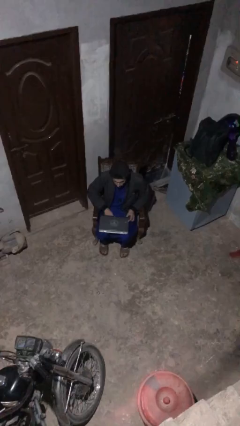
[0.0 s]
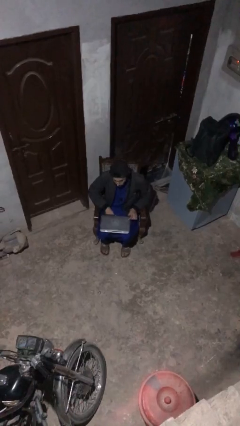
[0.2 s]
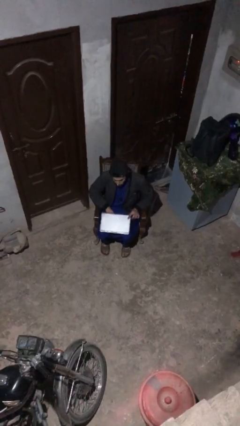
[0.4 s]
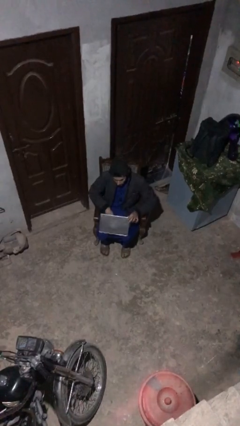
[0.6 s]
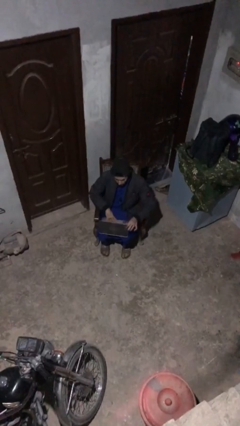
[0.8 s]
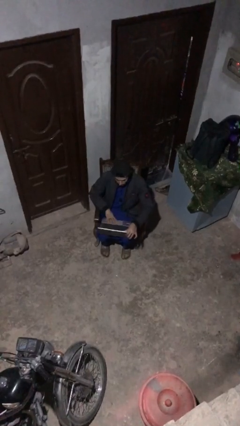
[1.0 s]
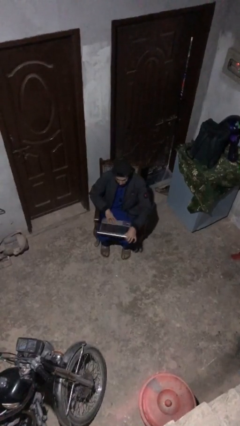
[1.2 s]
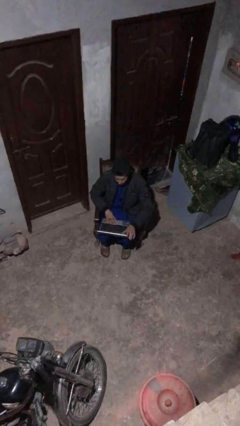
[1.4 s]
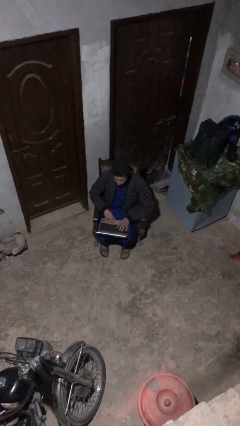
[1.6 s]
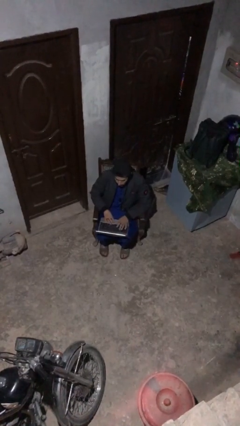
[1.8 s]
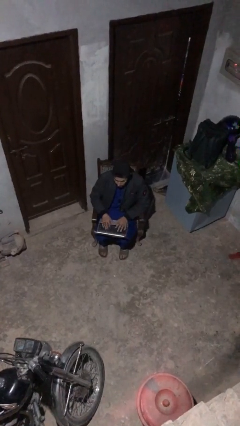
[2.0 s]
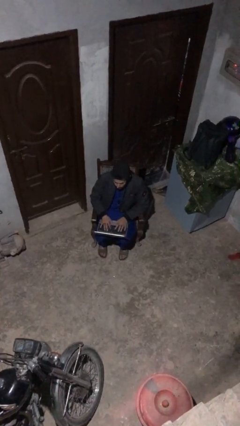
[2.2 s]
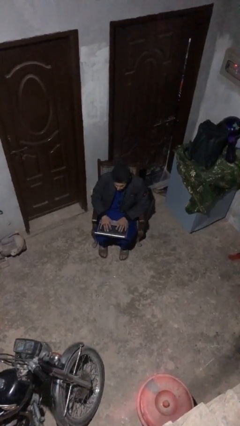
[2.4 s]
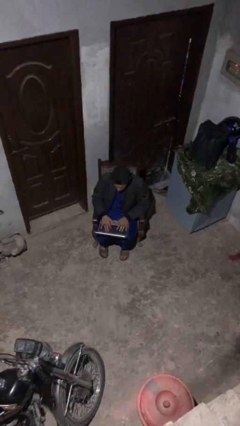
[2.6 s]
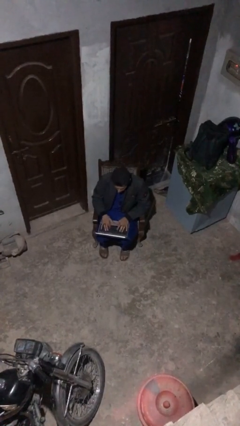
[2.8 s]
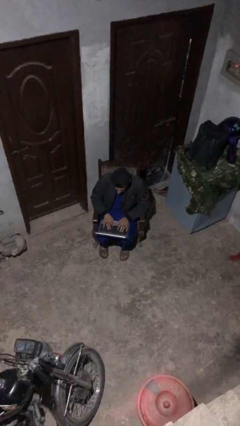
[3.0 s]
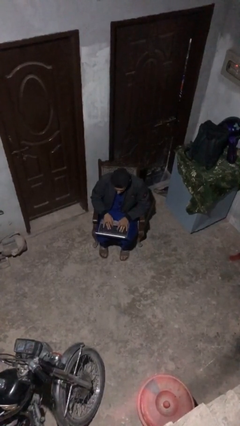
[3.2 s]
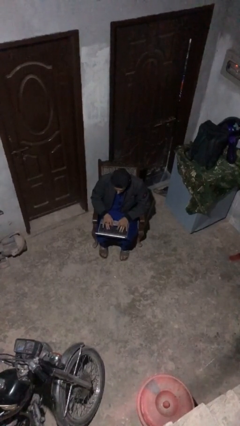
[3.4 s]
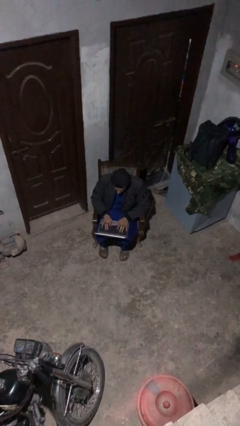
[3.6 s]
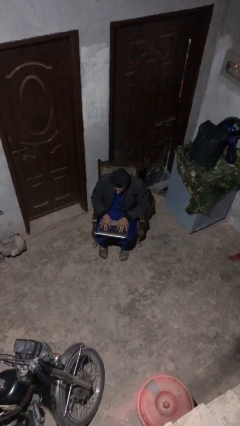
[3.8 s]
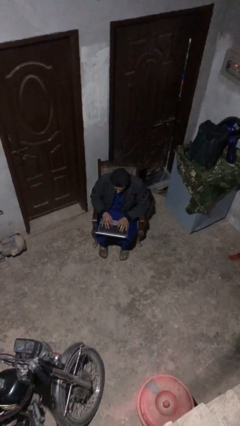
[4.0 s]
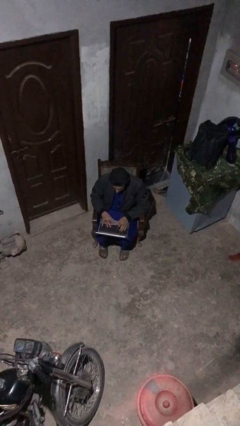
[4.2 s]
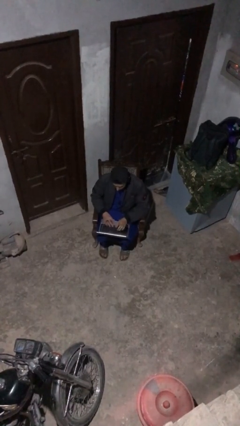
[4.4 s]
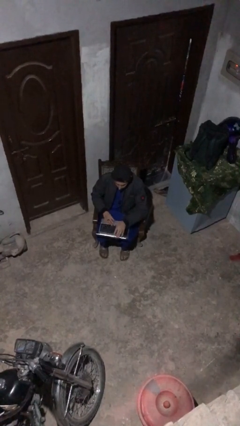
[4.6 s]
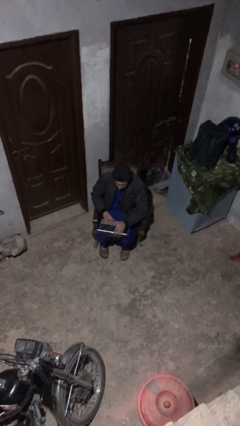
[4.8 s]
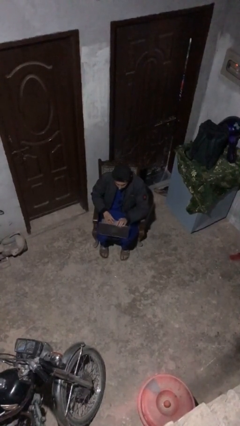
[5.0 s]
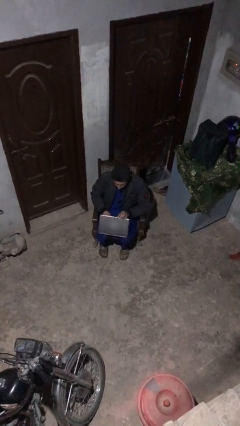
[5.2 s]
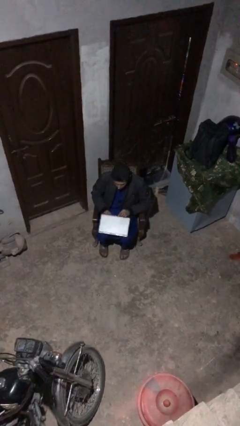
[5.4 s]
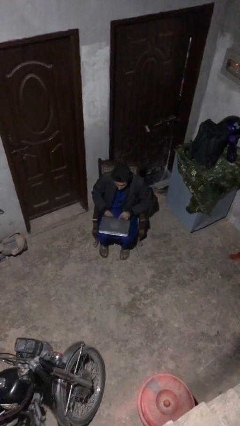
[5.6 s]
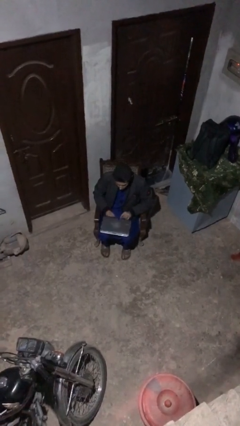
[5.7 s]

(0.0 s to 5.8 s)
person interacts with laptop

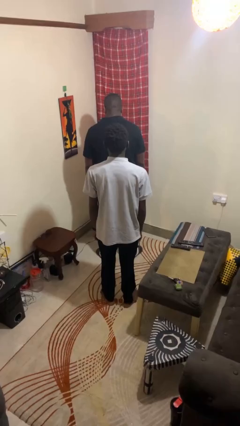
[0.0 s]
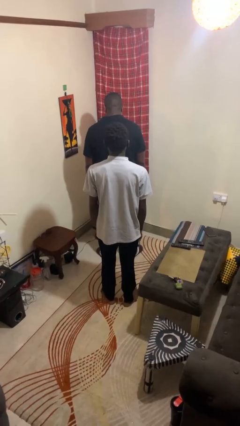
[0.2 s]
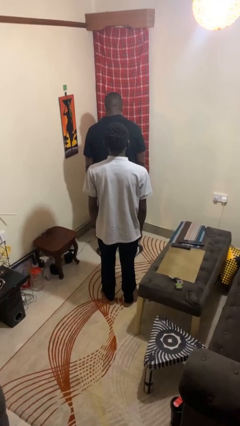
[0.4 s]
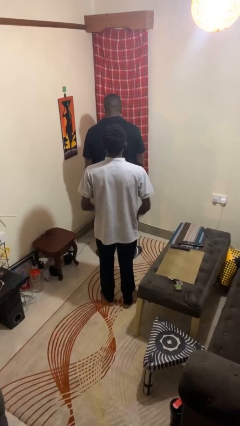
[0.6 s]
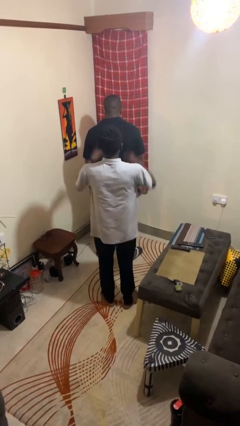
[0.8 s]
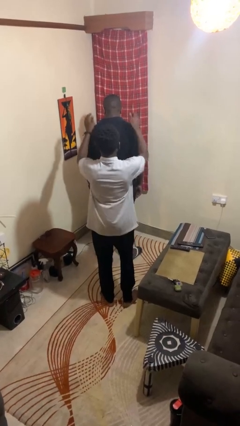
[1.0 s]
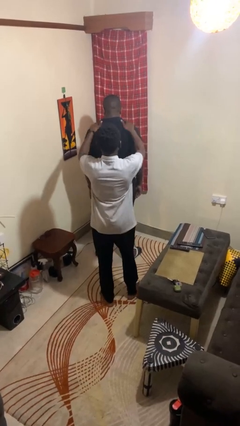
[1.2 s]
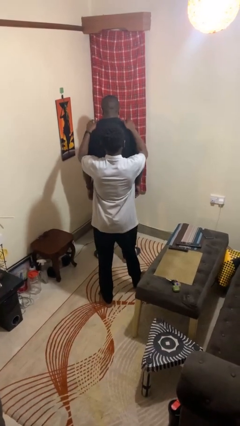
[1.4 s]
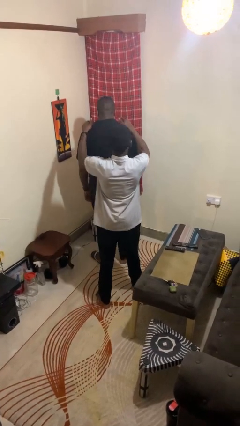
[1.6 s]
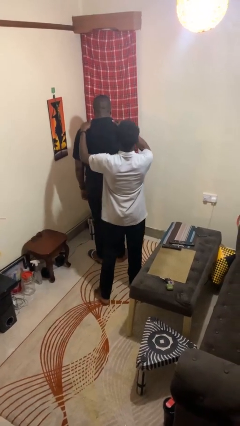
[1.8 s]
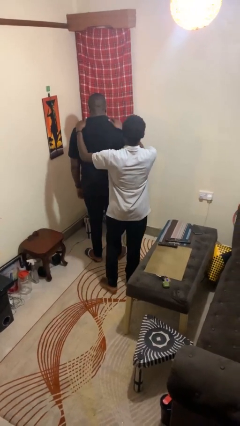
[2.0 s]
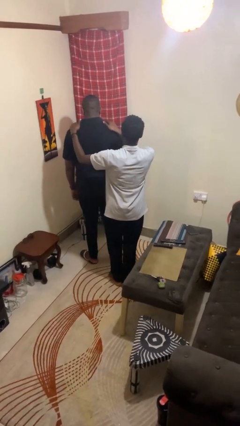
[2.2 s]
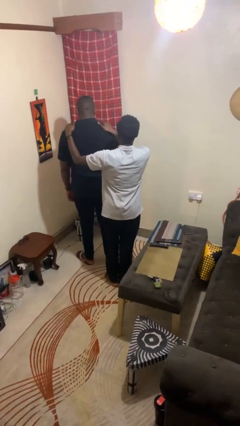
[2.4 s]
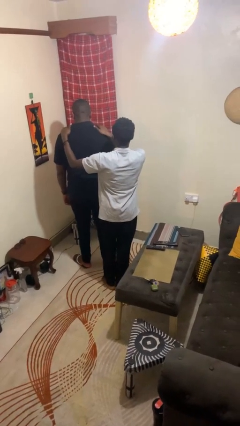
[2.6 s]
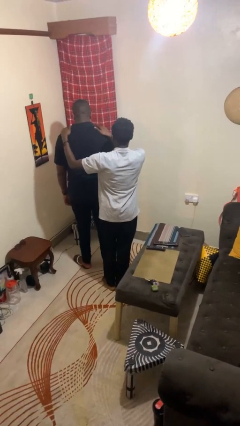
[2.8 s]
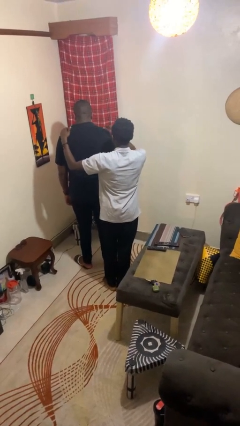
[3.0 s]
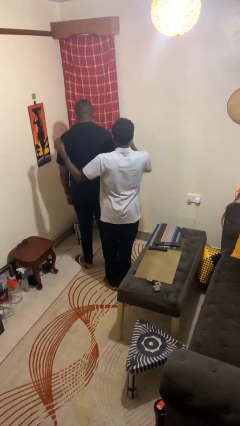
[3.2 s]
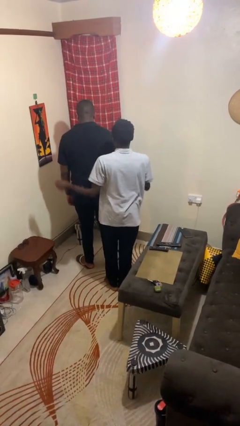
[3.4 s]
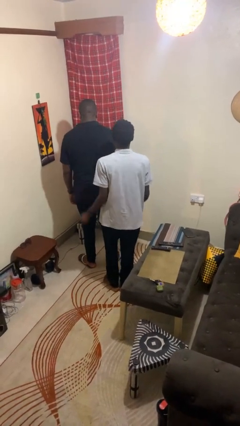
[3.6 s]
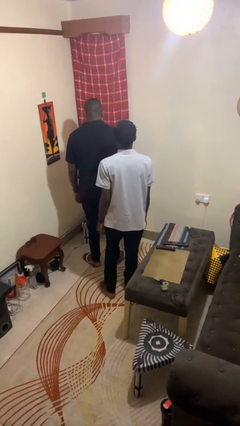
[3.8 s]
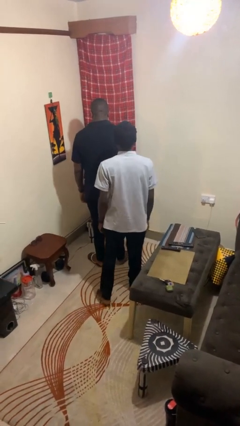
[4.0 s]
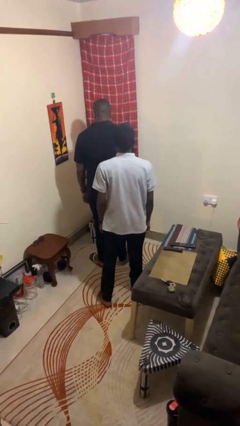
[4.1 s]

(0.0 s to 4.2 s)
person pounds shoulders of person

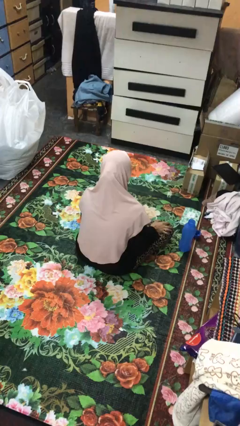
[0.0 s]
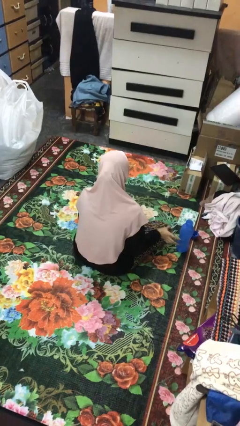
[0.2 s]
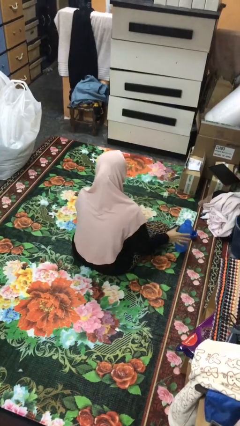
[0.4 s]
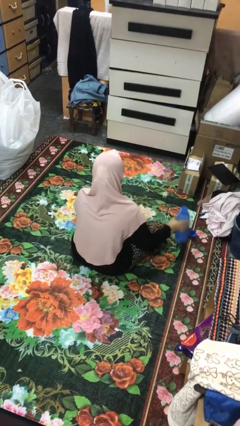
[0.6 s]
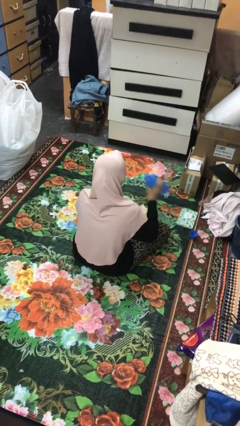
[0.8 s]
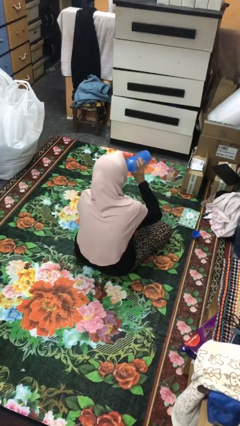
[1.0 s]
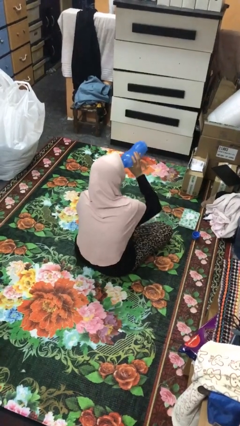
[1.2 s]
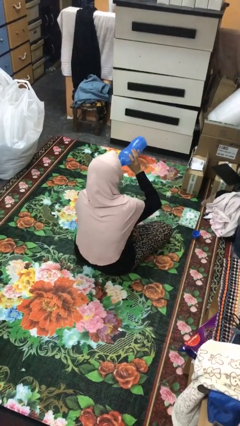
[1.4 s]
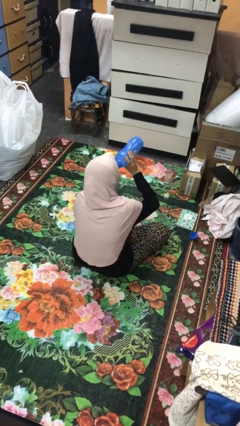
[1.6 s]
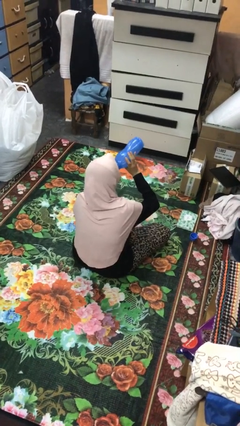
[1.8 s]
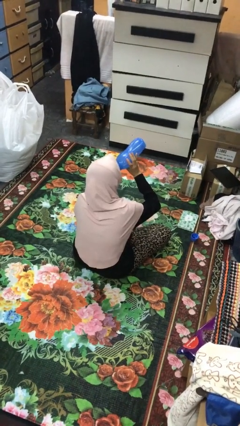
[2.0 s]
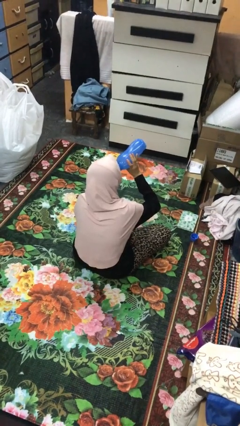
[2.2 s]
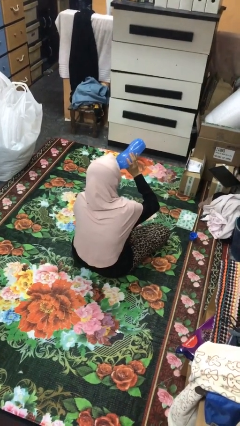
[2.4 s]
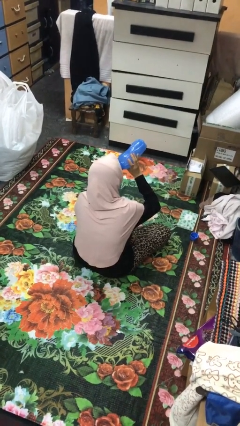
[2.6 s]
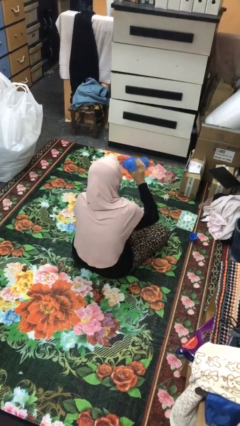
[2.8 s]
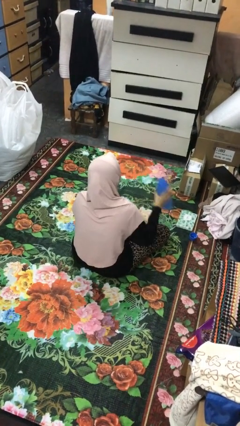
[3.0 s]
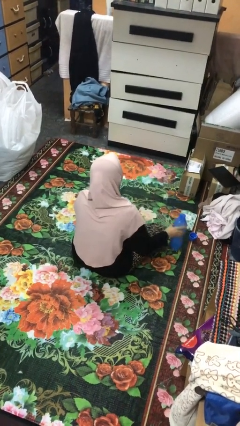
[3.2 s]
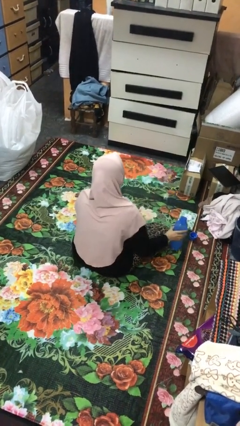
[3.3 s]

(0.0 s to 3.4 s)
person drinks from bottle

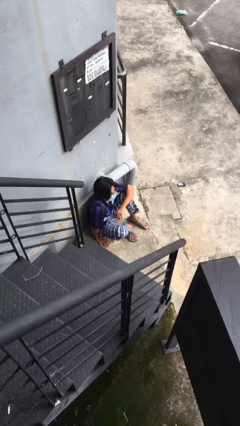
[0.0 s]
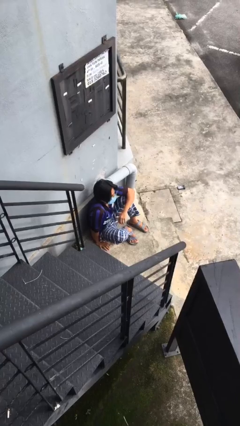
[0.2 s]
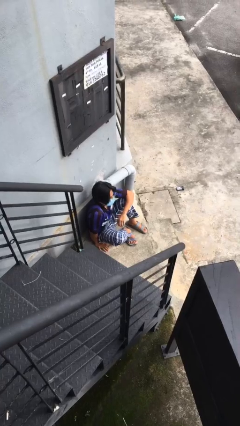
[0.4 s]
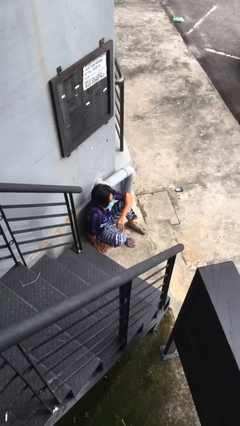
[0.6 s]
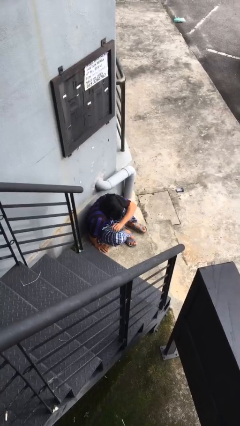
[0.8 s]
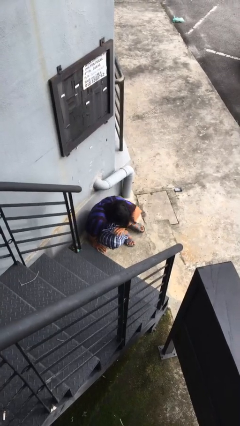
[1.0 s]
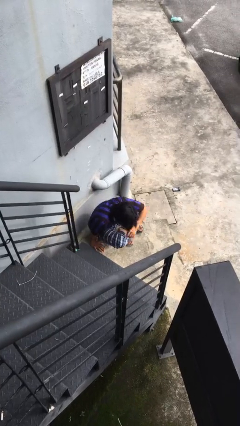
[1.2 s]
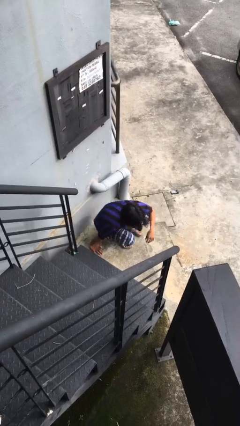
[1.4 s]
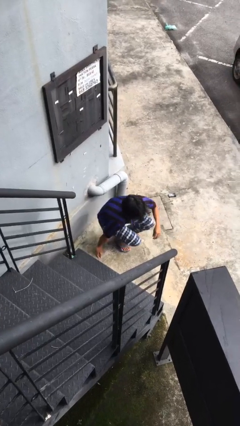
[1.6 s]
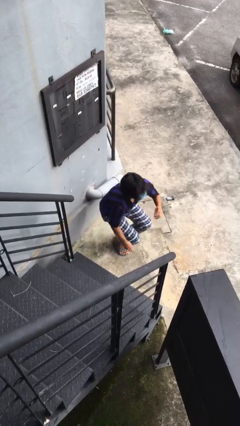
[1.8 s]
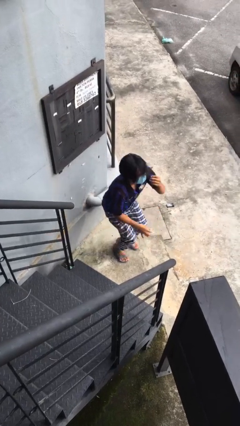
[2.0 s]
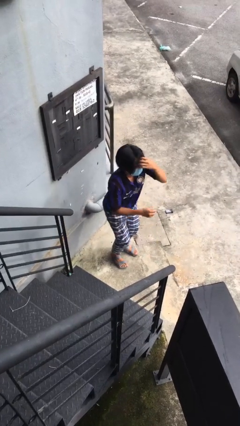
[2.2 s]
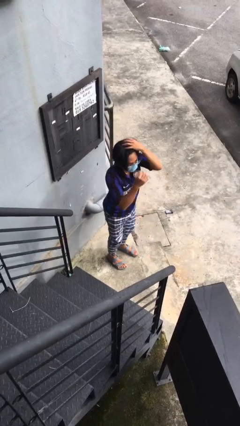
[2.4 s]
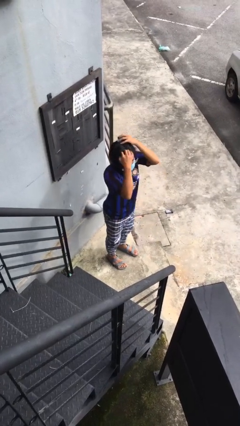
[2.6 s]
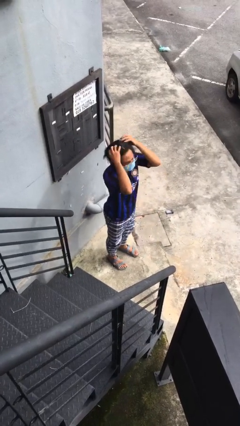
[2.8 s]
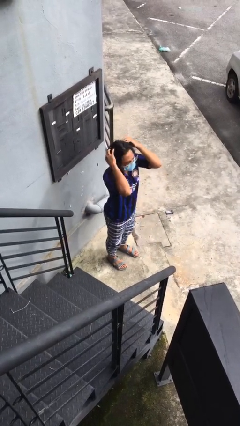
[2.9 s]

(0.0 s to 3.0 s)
person stands up

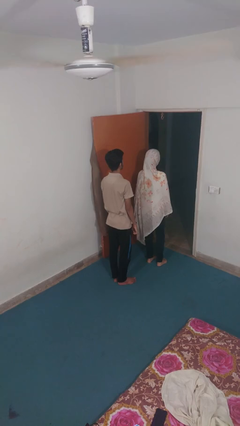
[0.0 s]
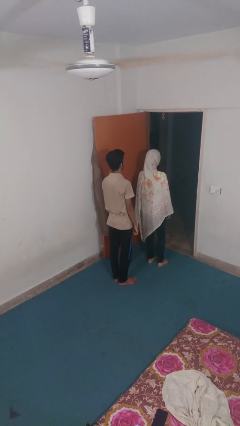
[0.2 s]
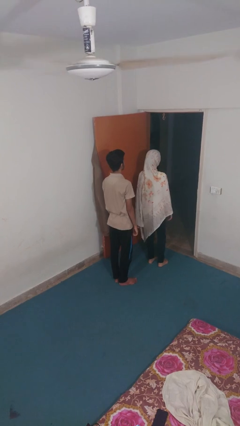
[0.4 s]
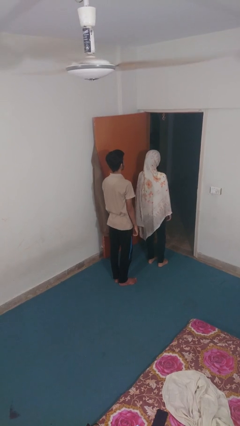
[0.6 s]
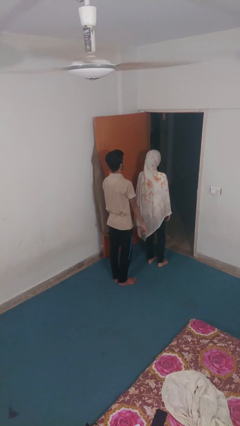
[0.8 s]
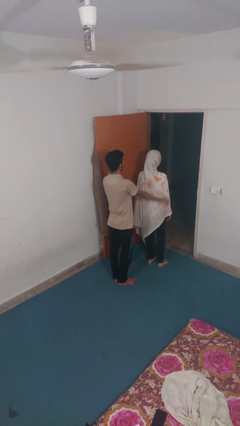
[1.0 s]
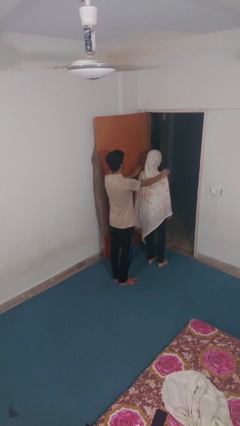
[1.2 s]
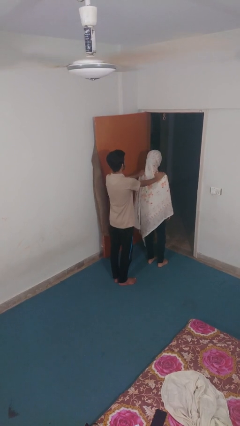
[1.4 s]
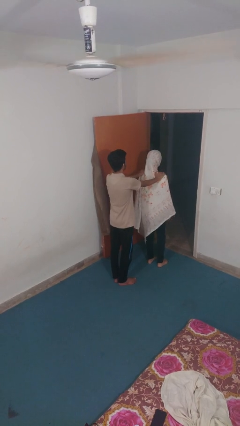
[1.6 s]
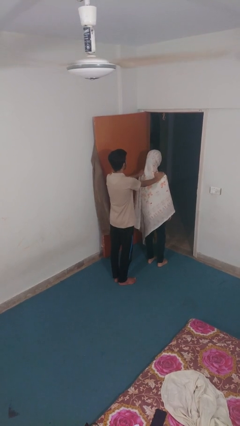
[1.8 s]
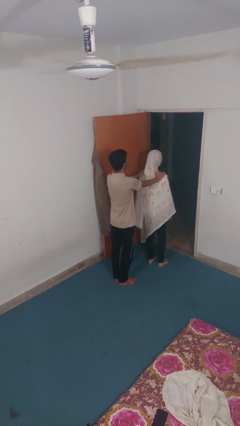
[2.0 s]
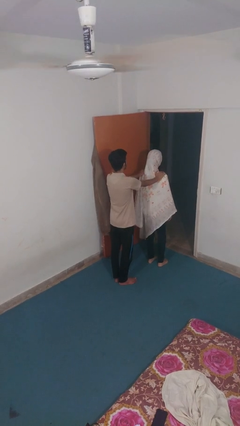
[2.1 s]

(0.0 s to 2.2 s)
person grabs person by shoulder
